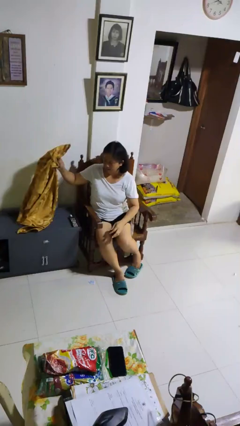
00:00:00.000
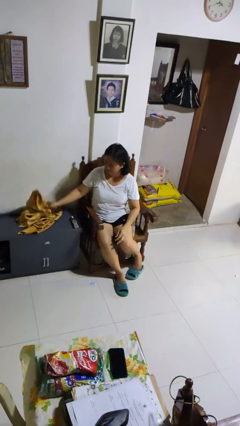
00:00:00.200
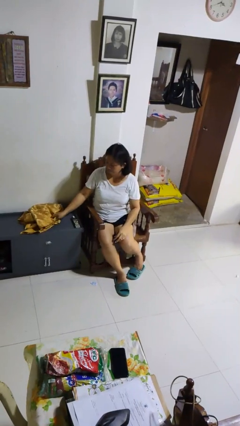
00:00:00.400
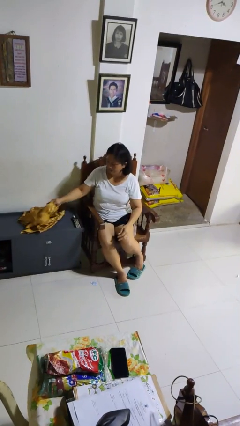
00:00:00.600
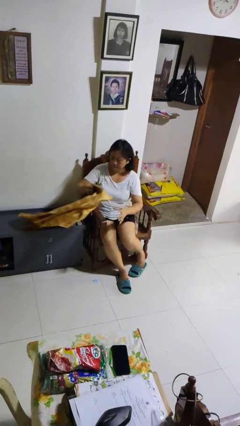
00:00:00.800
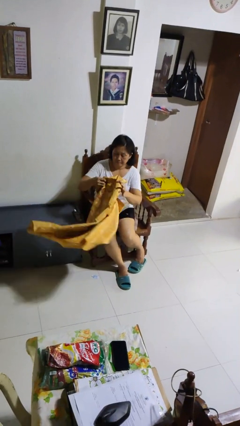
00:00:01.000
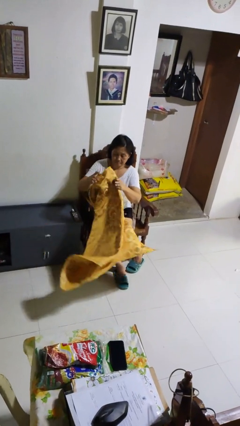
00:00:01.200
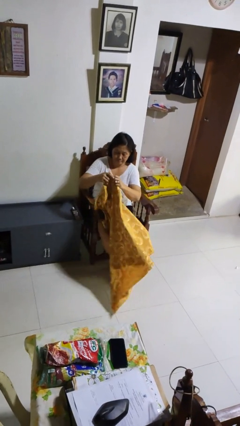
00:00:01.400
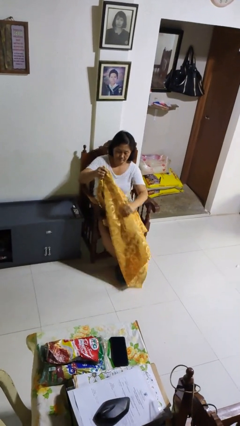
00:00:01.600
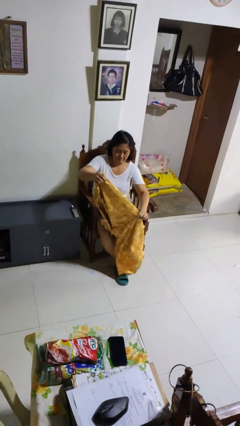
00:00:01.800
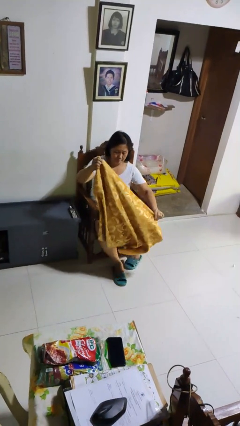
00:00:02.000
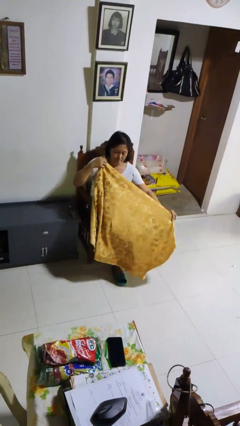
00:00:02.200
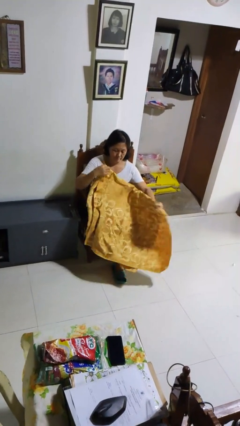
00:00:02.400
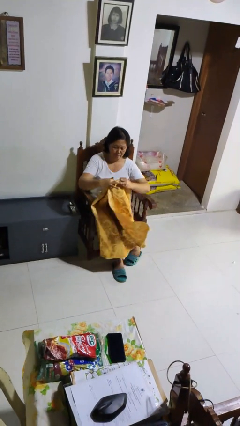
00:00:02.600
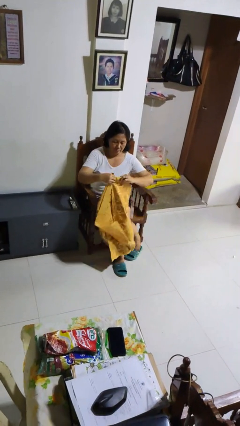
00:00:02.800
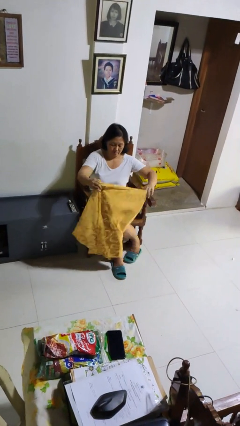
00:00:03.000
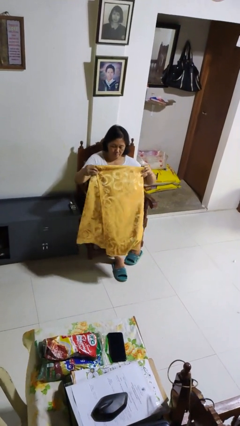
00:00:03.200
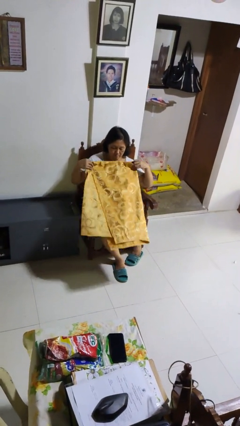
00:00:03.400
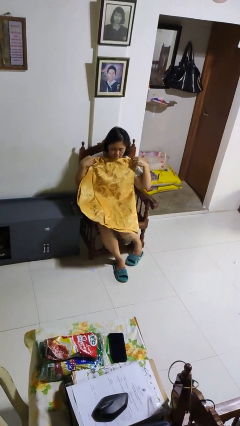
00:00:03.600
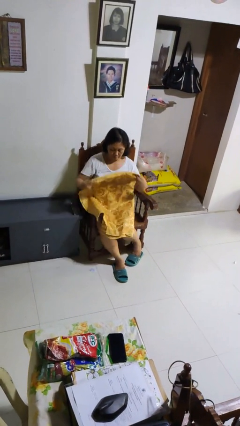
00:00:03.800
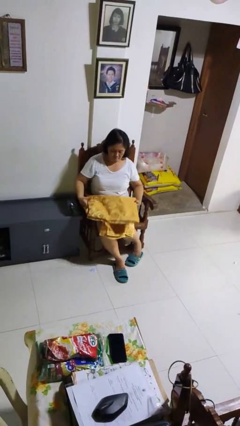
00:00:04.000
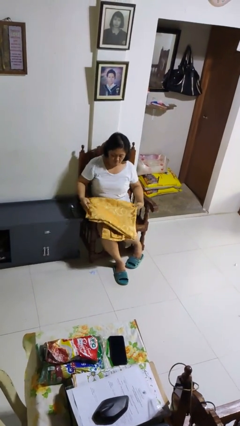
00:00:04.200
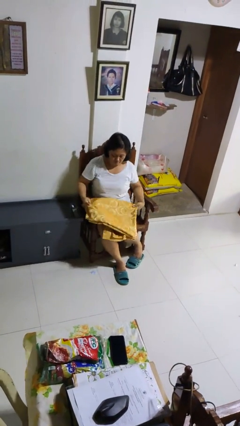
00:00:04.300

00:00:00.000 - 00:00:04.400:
person folds blanket

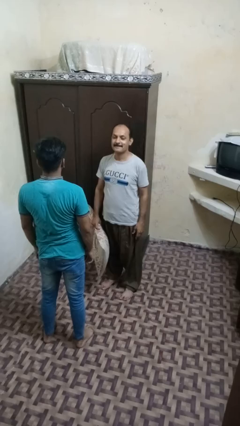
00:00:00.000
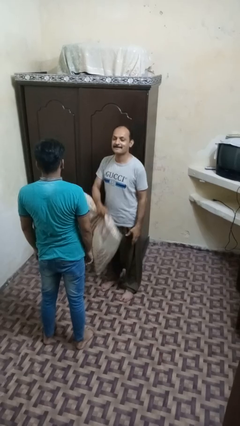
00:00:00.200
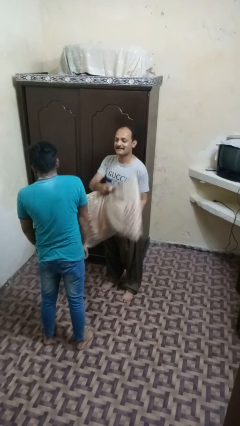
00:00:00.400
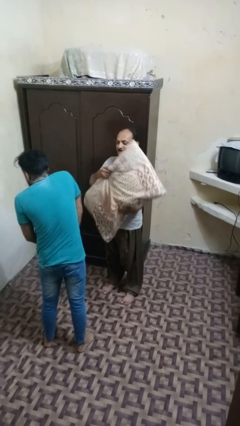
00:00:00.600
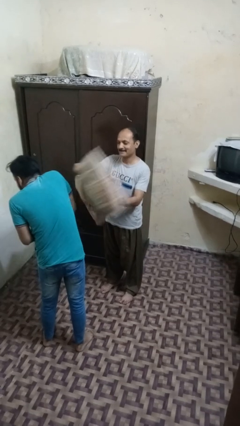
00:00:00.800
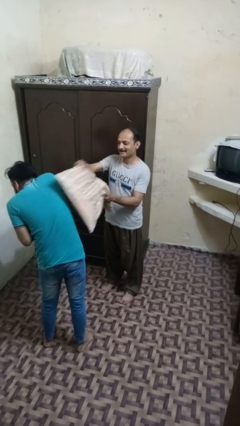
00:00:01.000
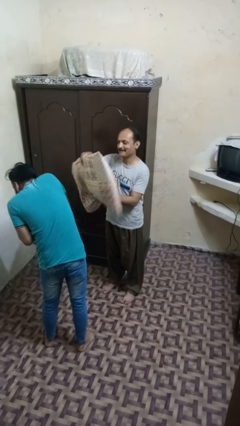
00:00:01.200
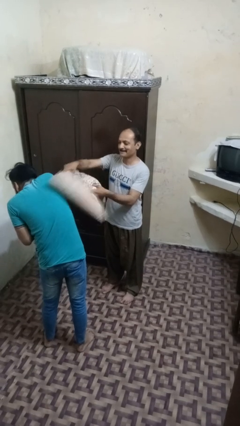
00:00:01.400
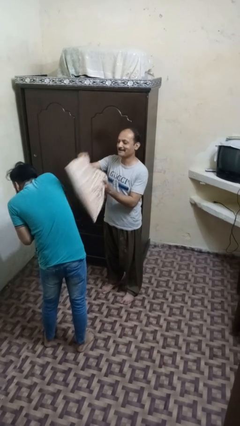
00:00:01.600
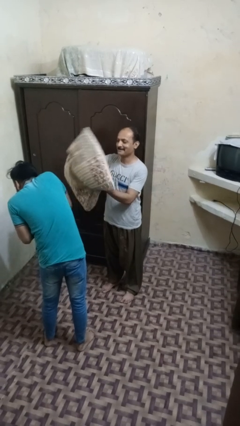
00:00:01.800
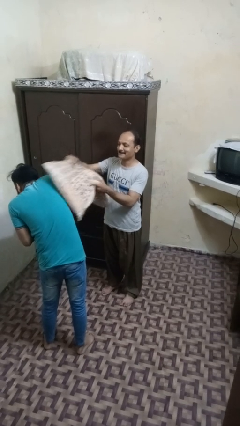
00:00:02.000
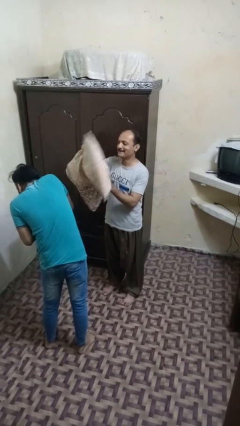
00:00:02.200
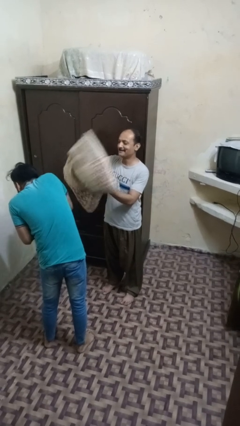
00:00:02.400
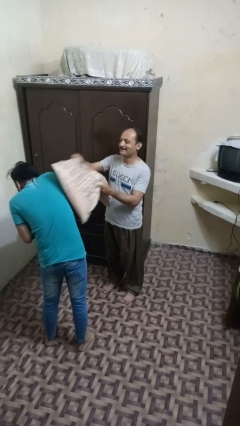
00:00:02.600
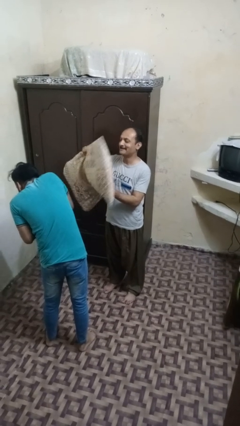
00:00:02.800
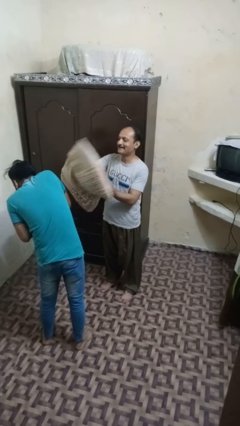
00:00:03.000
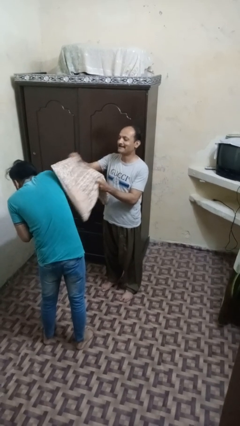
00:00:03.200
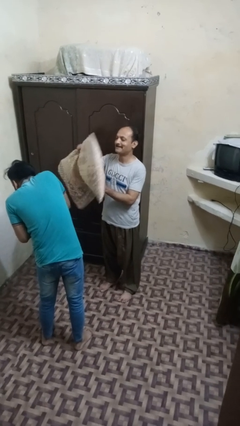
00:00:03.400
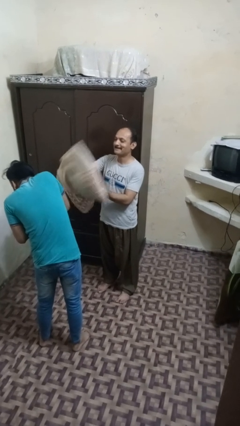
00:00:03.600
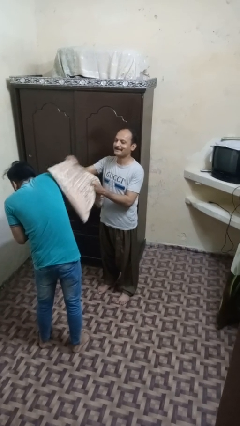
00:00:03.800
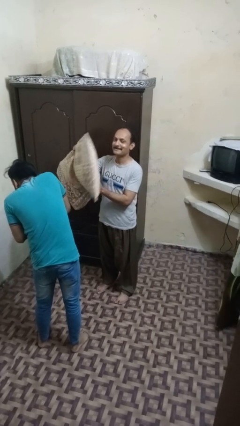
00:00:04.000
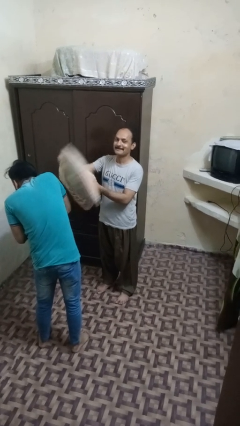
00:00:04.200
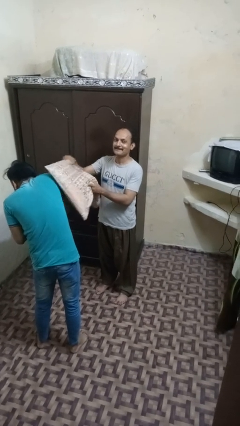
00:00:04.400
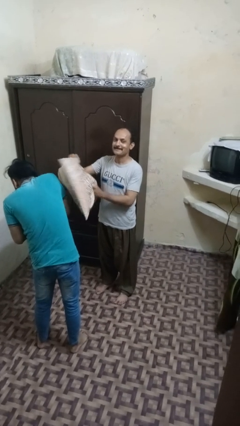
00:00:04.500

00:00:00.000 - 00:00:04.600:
person hits person with pillow

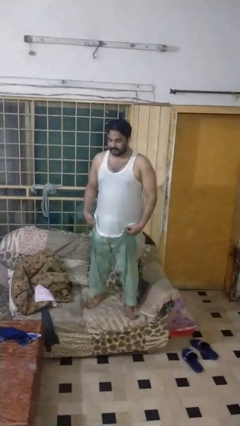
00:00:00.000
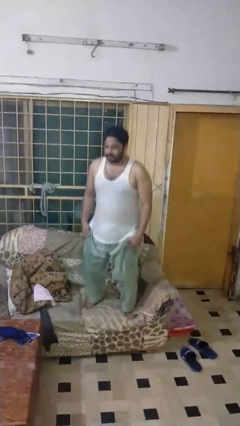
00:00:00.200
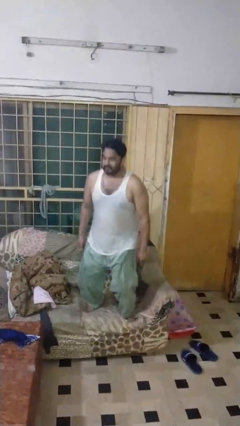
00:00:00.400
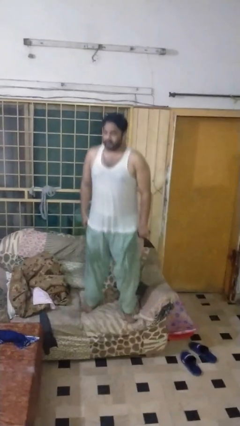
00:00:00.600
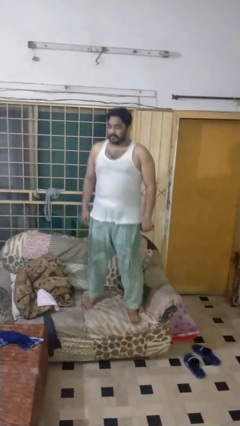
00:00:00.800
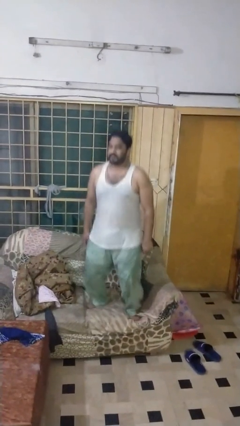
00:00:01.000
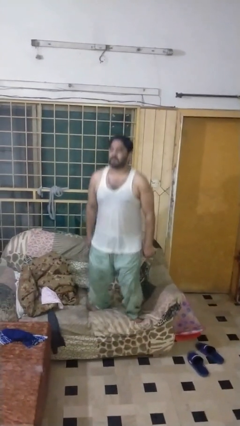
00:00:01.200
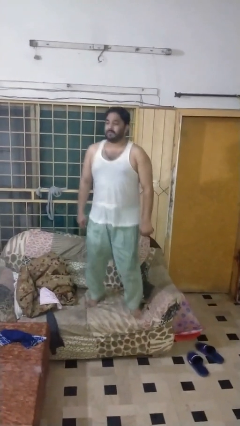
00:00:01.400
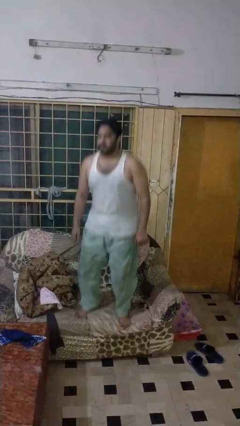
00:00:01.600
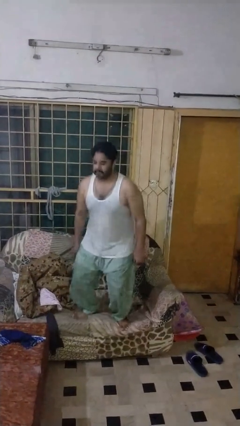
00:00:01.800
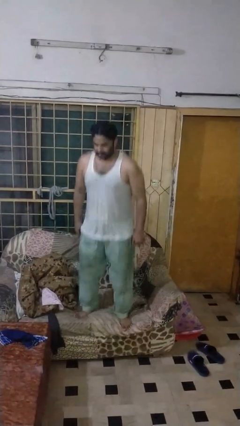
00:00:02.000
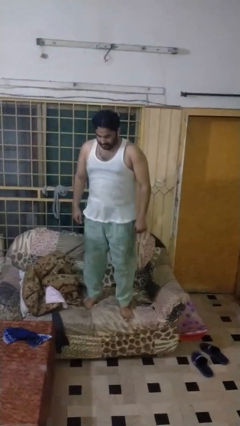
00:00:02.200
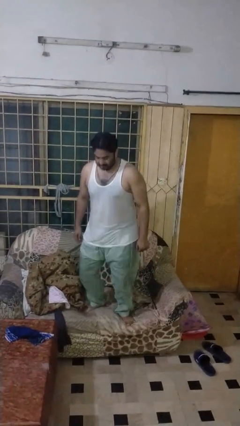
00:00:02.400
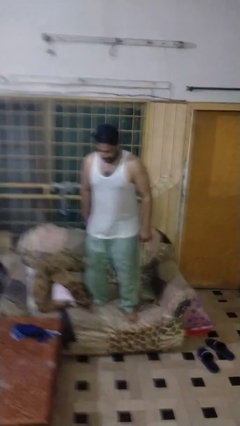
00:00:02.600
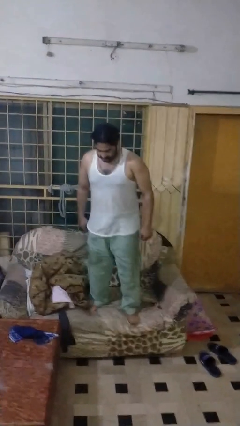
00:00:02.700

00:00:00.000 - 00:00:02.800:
person jumps on couch

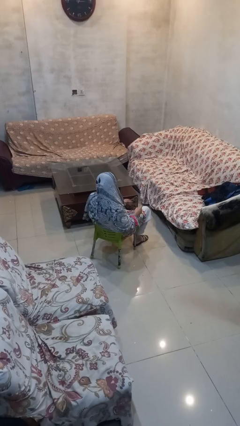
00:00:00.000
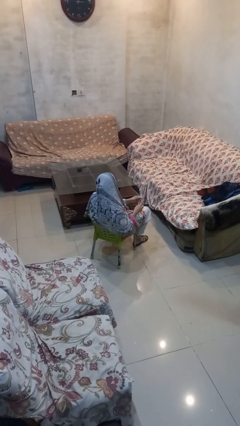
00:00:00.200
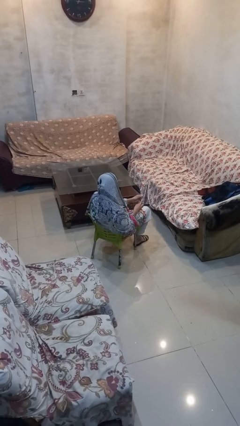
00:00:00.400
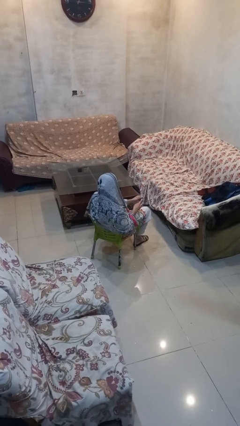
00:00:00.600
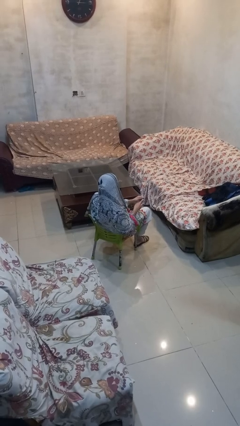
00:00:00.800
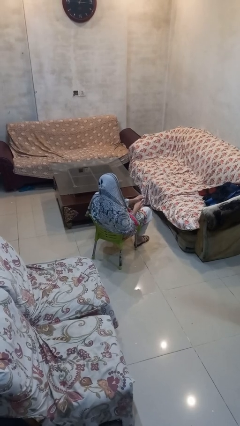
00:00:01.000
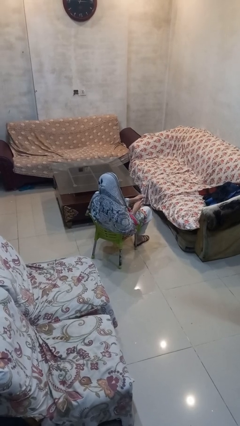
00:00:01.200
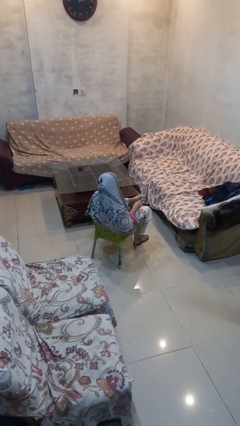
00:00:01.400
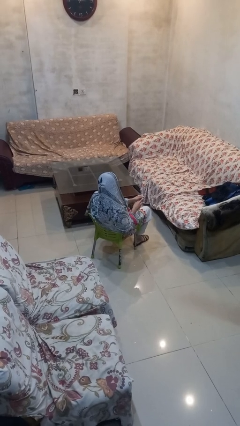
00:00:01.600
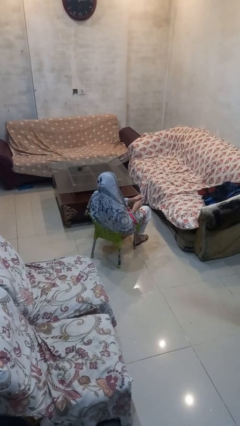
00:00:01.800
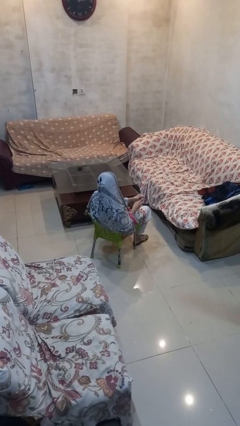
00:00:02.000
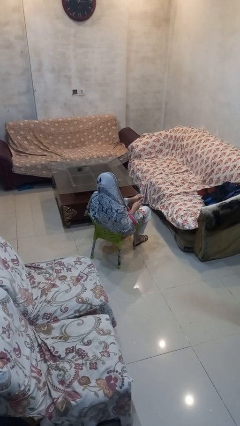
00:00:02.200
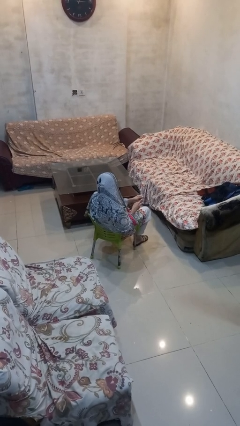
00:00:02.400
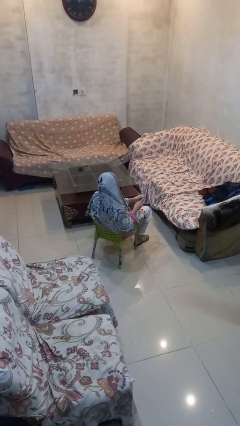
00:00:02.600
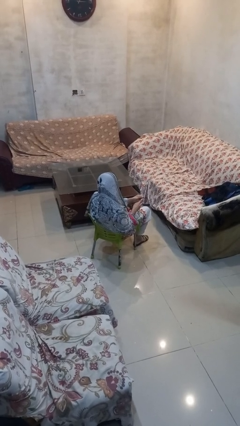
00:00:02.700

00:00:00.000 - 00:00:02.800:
person files fingernails

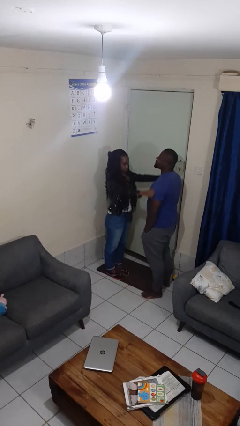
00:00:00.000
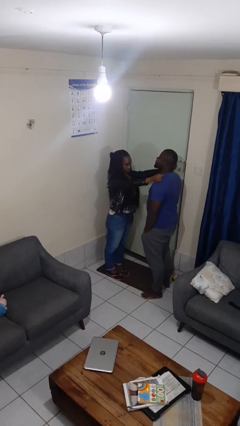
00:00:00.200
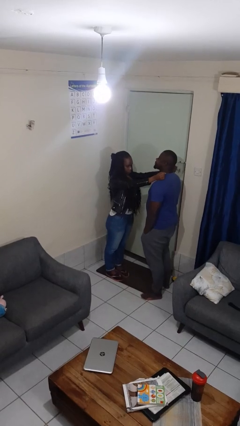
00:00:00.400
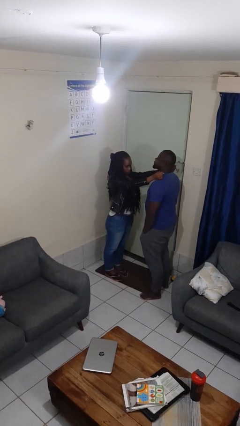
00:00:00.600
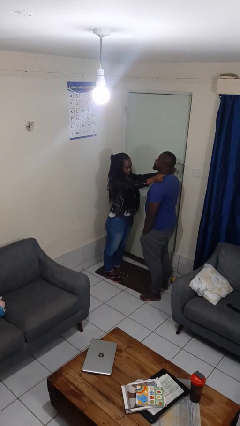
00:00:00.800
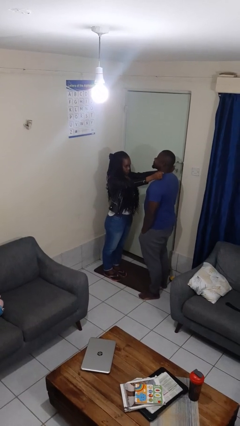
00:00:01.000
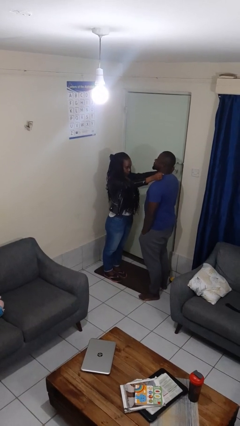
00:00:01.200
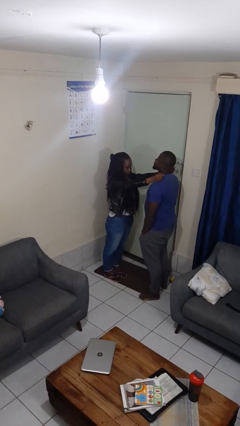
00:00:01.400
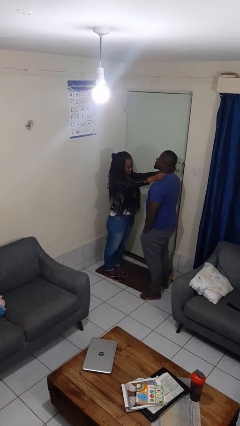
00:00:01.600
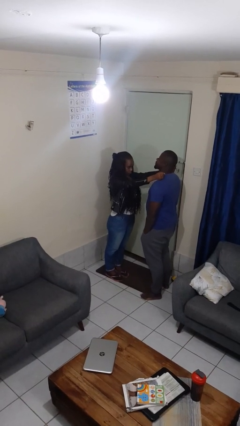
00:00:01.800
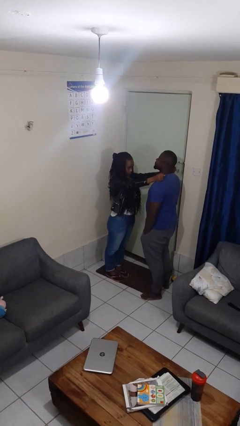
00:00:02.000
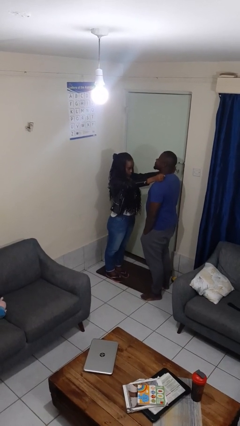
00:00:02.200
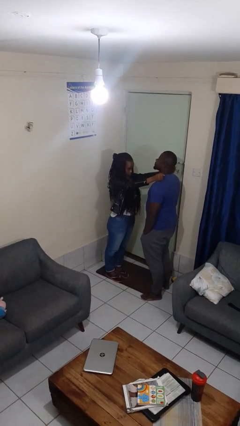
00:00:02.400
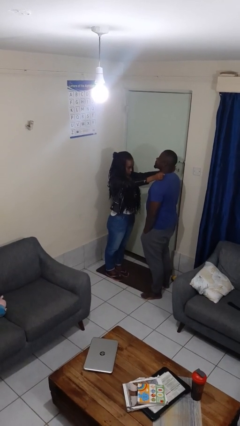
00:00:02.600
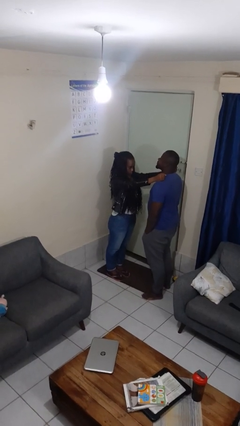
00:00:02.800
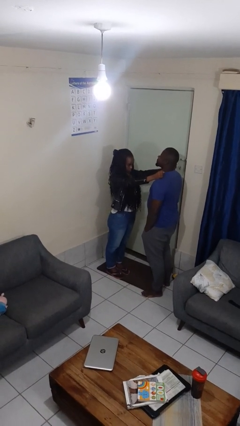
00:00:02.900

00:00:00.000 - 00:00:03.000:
person pounds shoulders of person

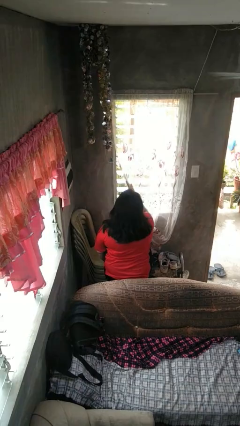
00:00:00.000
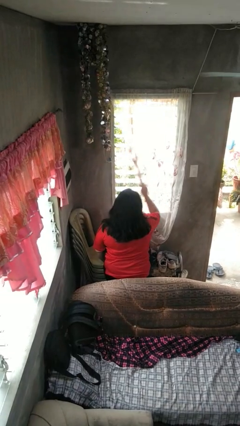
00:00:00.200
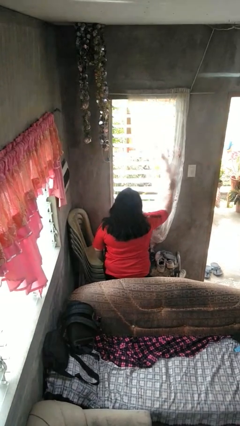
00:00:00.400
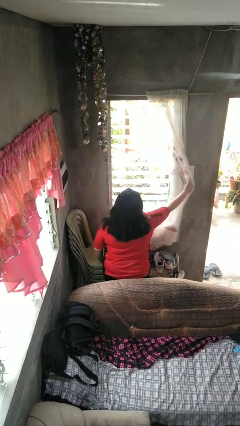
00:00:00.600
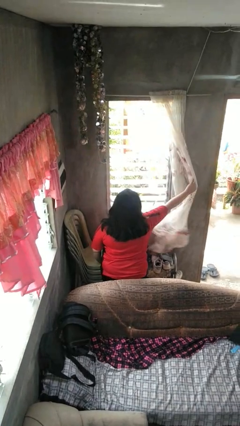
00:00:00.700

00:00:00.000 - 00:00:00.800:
person opens curtains
